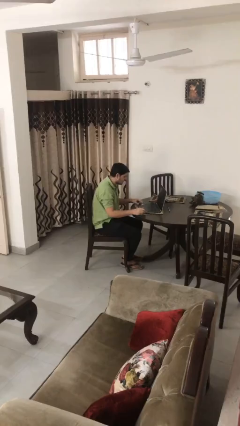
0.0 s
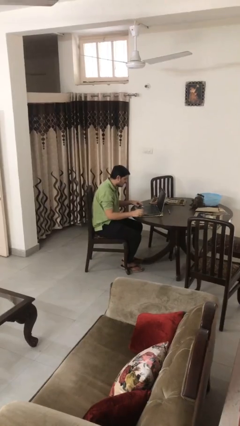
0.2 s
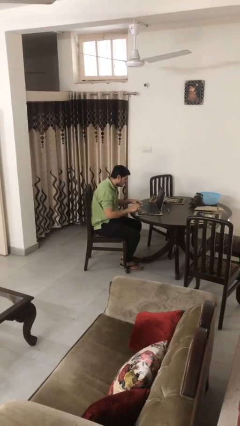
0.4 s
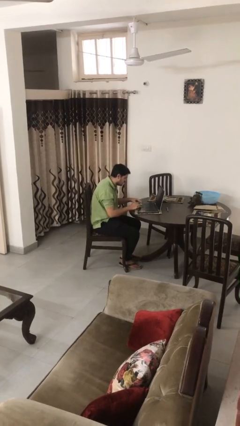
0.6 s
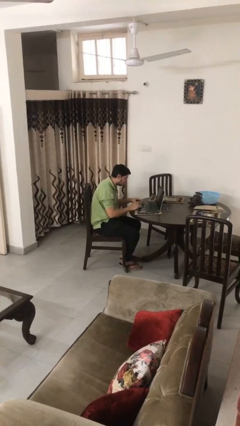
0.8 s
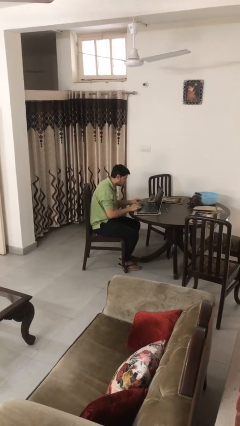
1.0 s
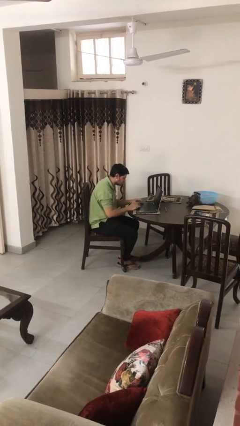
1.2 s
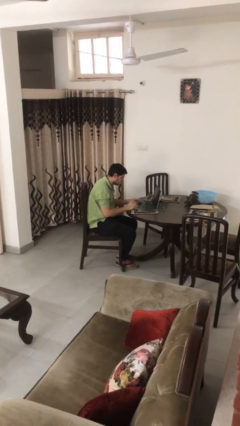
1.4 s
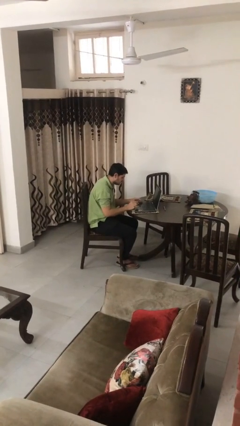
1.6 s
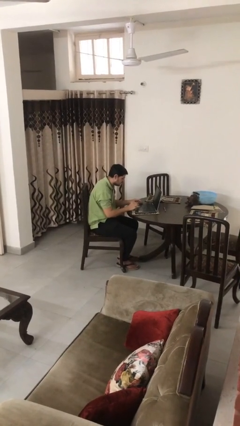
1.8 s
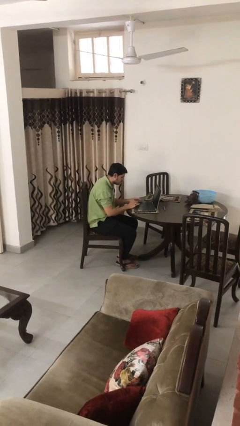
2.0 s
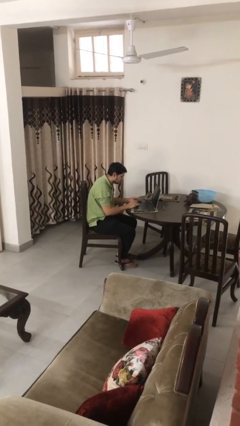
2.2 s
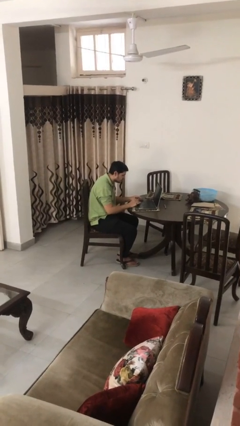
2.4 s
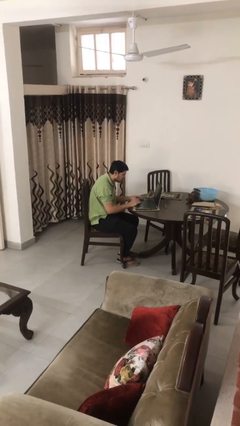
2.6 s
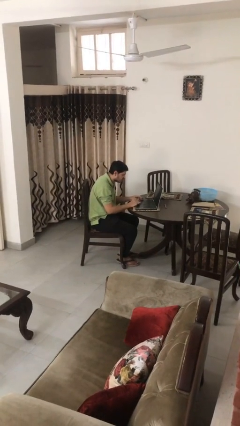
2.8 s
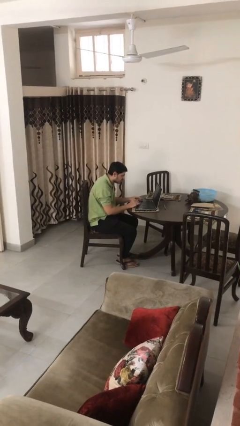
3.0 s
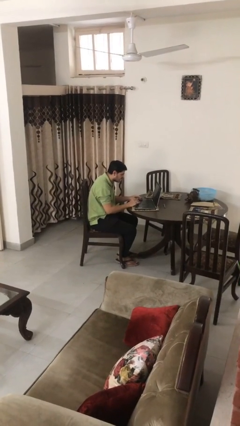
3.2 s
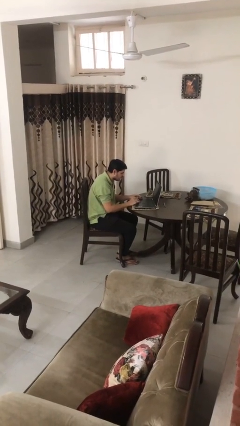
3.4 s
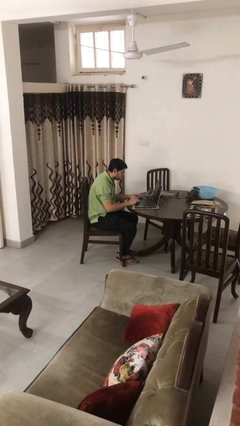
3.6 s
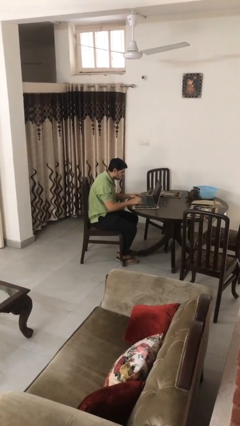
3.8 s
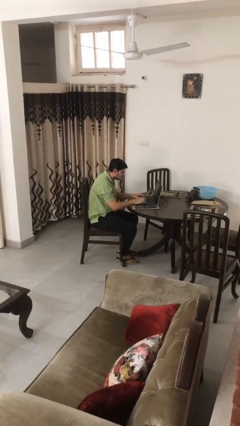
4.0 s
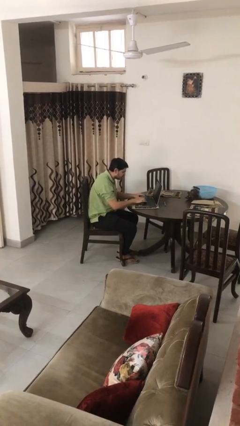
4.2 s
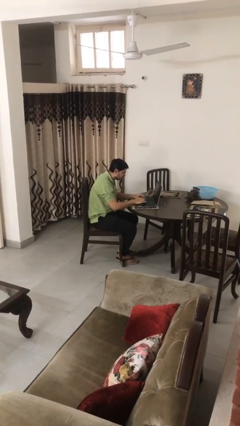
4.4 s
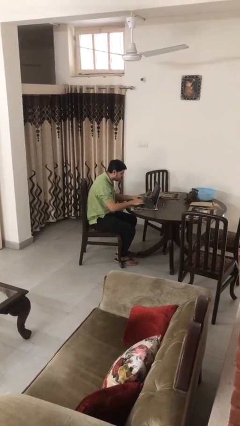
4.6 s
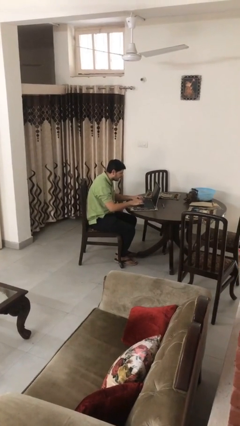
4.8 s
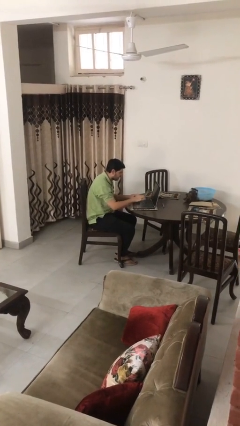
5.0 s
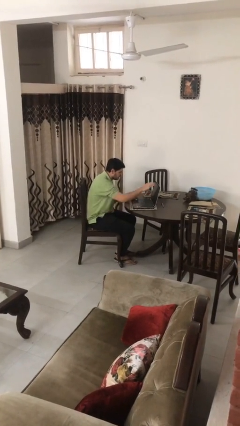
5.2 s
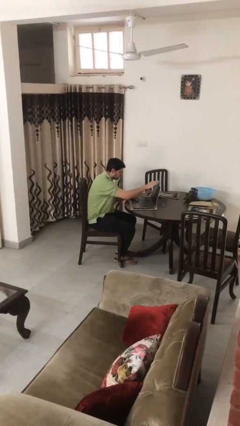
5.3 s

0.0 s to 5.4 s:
person interacts with laptop

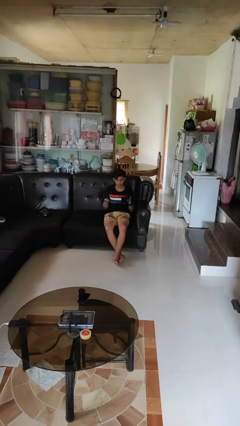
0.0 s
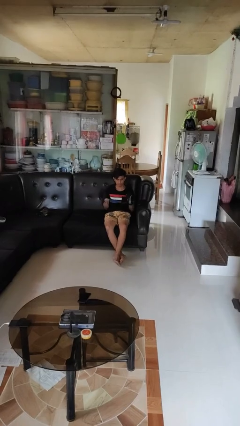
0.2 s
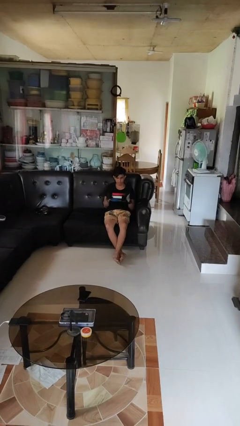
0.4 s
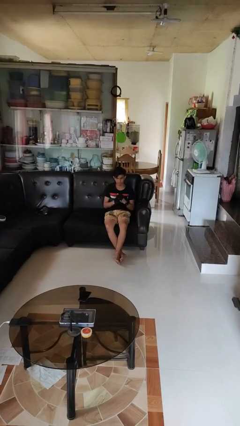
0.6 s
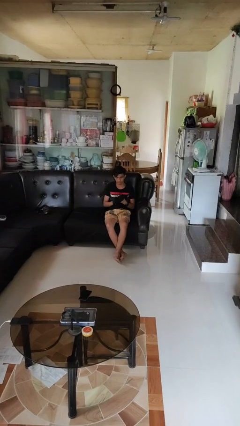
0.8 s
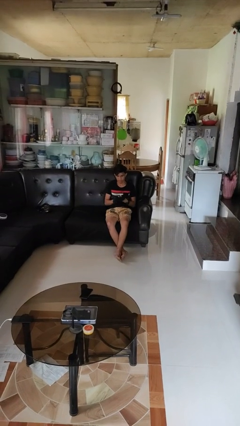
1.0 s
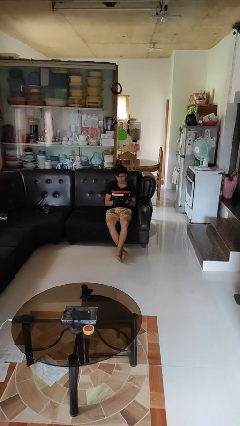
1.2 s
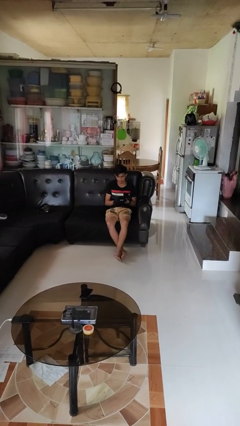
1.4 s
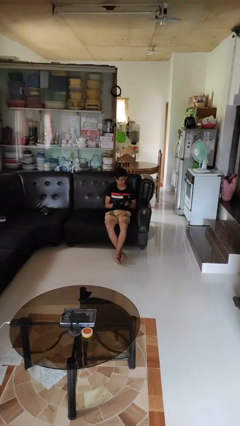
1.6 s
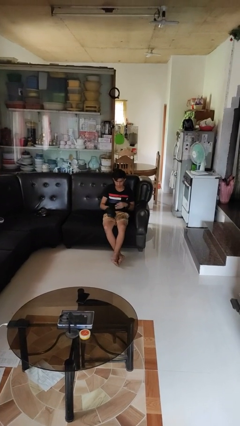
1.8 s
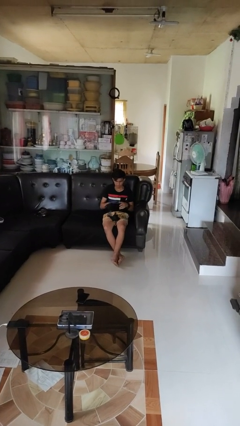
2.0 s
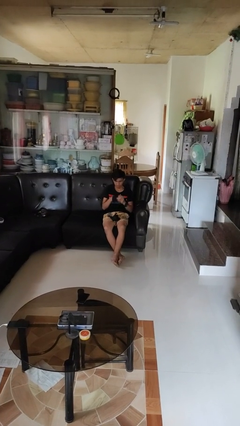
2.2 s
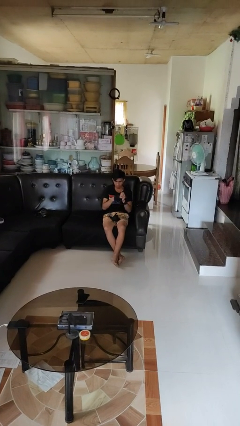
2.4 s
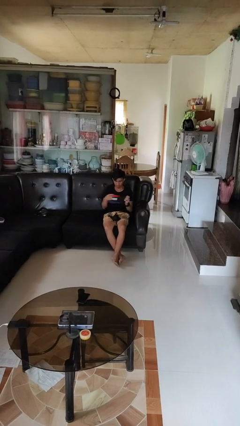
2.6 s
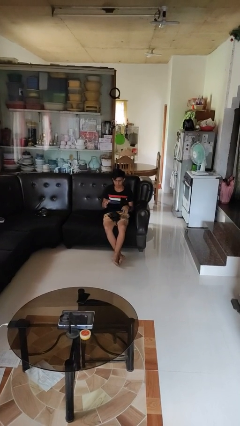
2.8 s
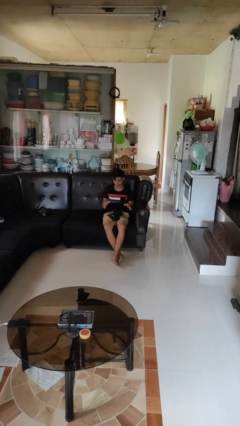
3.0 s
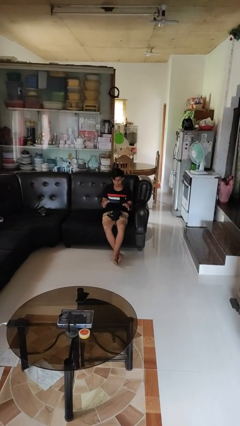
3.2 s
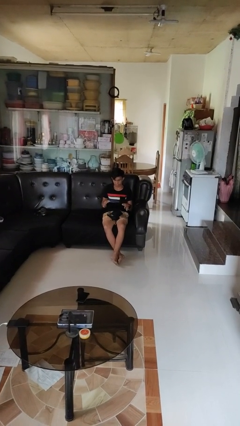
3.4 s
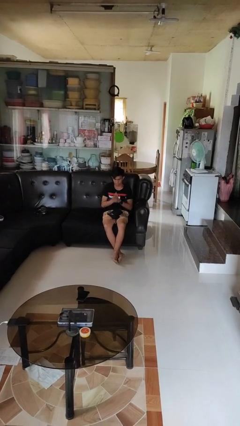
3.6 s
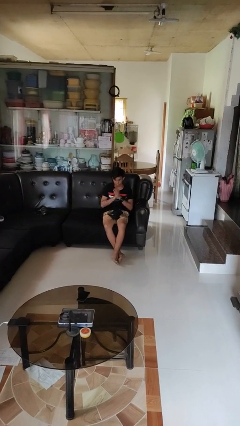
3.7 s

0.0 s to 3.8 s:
person takes off gloves

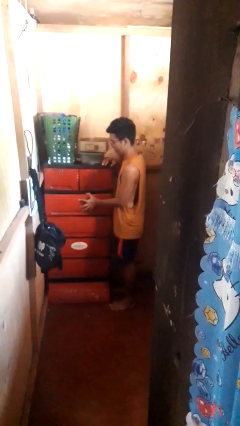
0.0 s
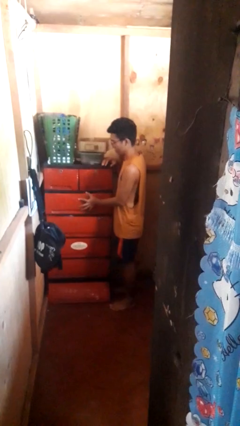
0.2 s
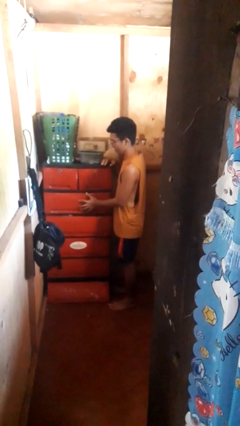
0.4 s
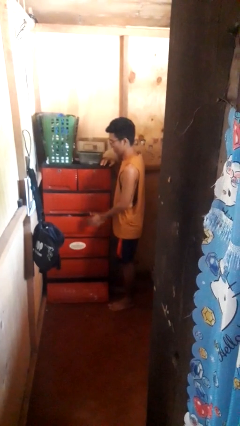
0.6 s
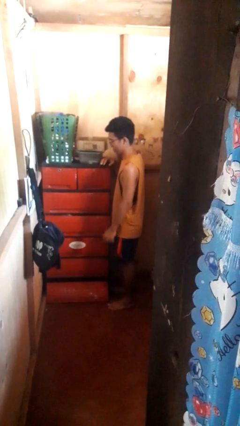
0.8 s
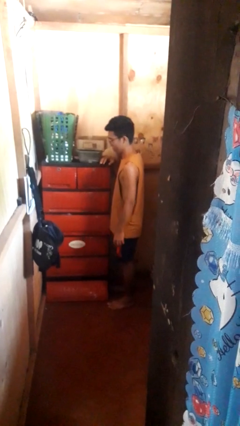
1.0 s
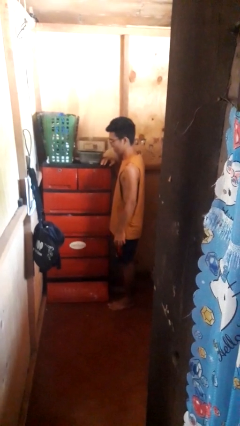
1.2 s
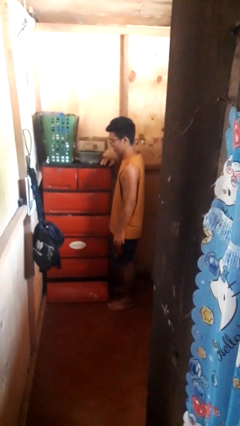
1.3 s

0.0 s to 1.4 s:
person closes dresser drawer

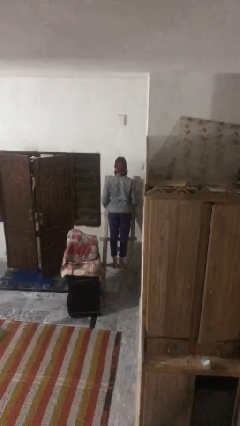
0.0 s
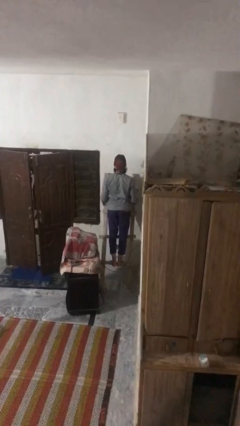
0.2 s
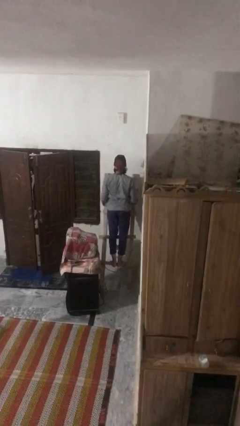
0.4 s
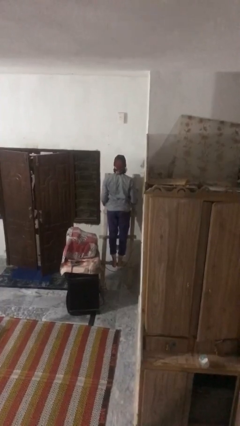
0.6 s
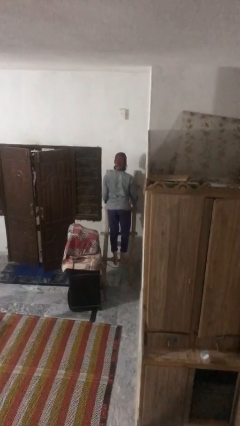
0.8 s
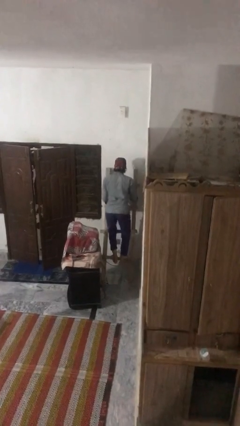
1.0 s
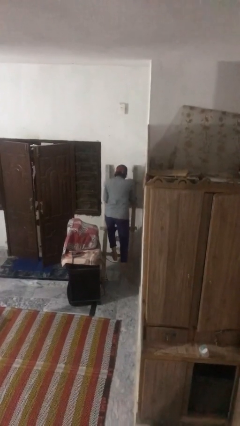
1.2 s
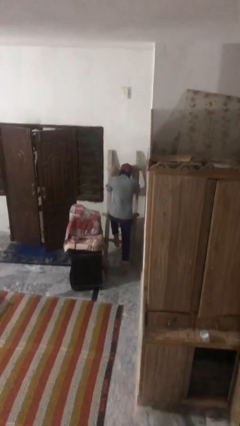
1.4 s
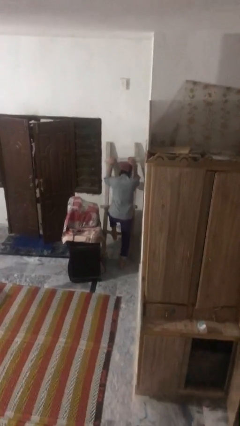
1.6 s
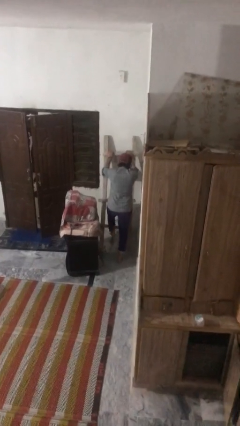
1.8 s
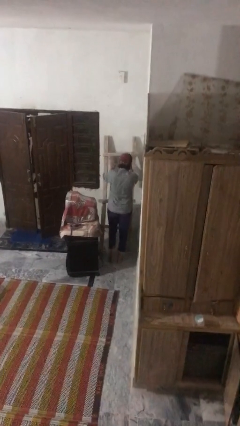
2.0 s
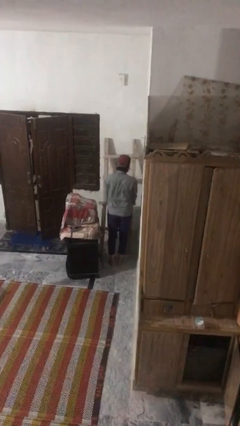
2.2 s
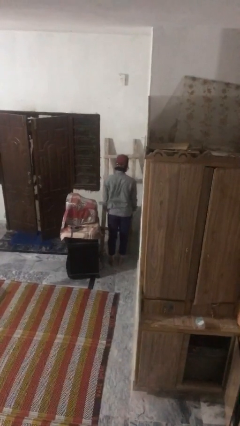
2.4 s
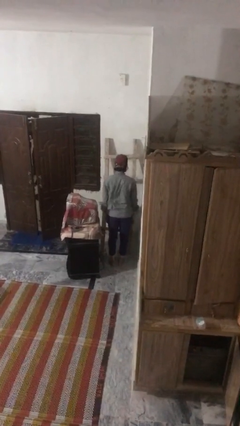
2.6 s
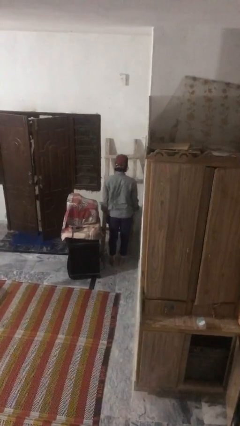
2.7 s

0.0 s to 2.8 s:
person climbs down ladder

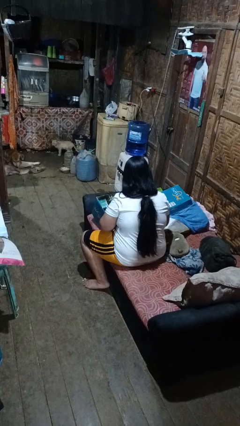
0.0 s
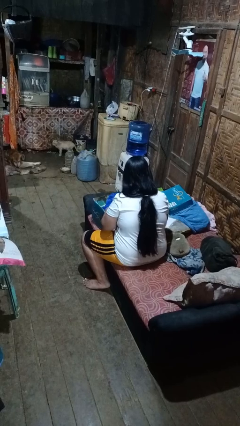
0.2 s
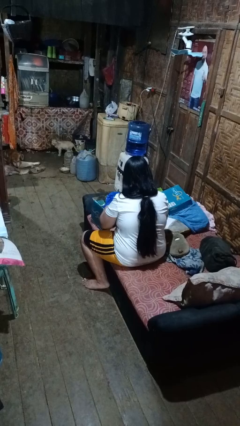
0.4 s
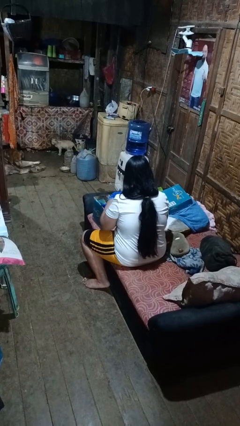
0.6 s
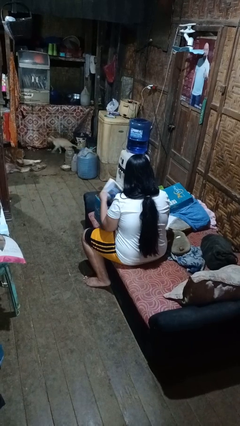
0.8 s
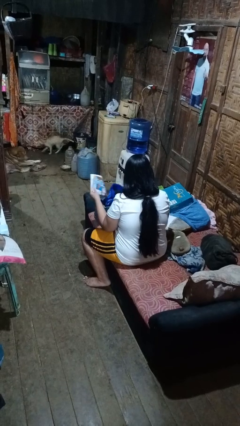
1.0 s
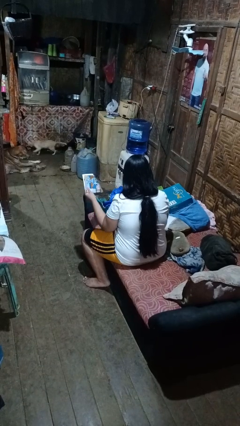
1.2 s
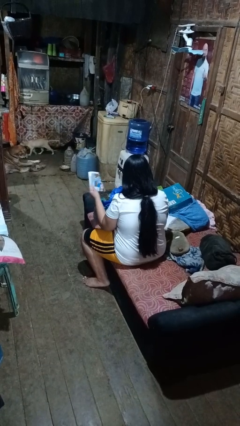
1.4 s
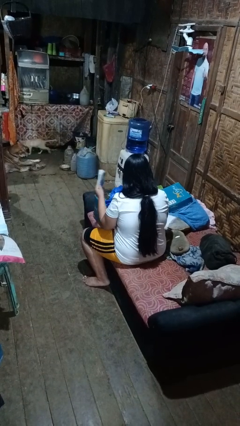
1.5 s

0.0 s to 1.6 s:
person searches in box

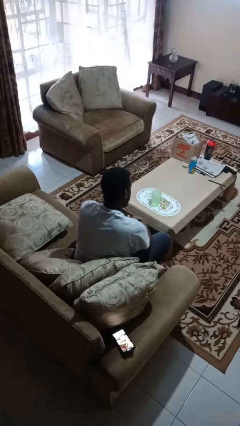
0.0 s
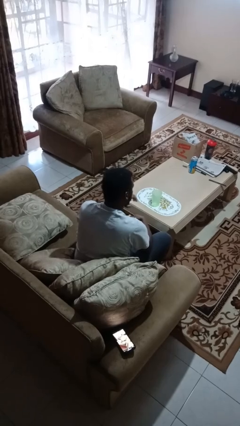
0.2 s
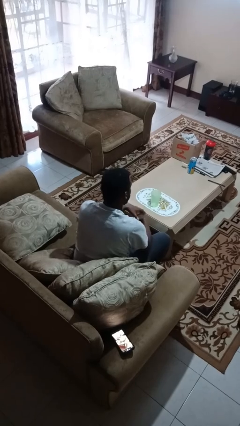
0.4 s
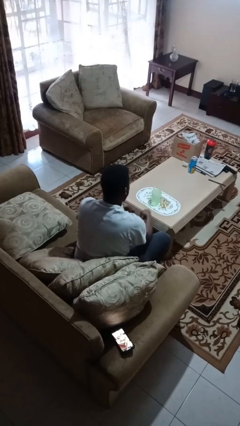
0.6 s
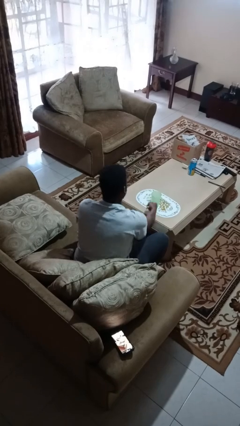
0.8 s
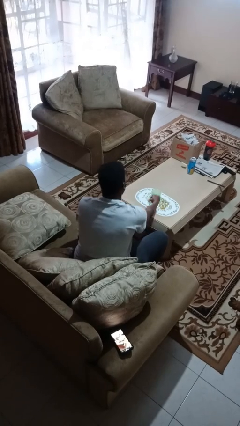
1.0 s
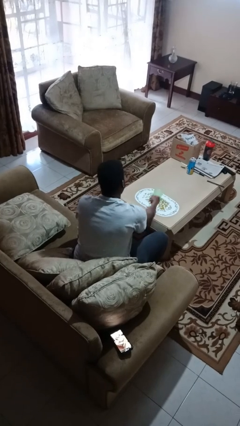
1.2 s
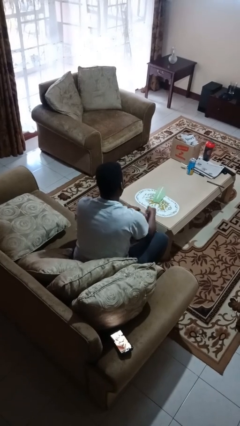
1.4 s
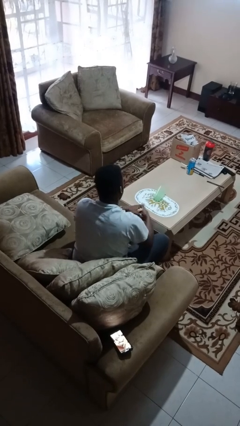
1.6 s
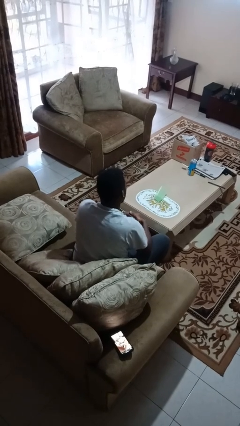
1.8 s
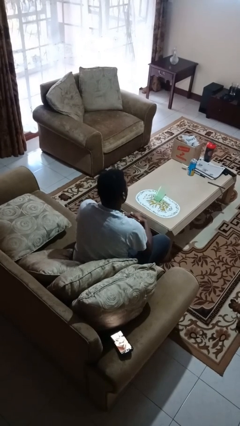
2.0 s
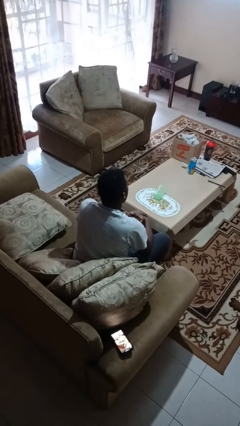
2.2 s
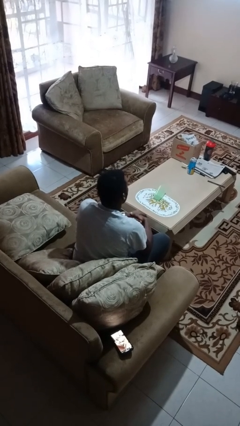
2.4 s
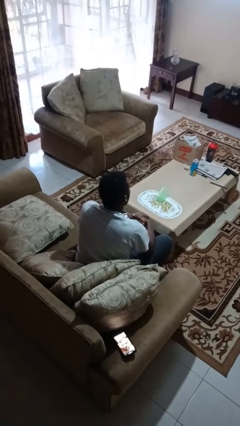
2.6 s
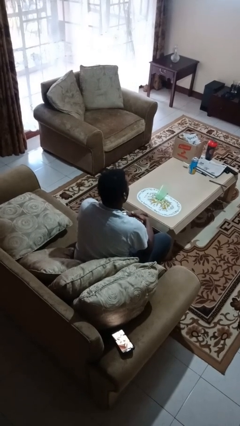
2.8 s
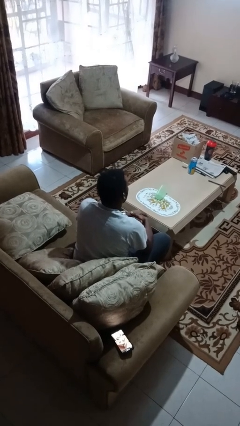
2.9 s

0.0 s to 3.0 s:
person knocks over glass
